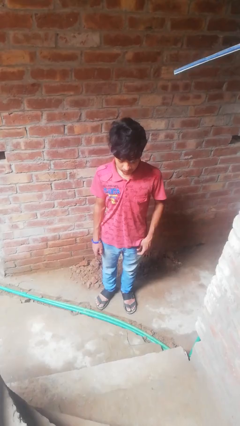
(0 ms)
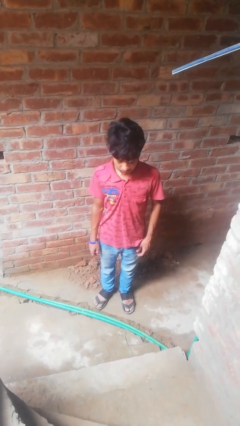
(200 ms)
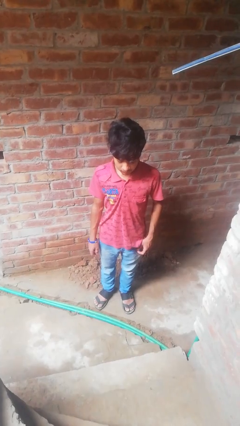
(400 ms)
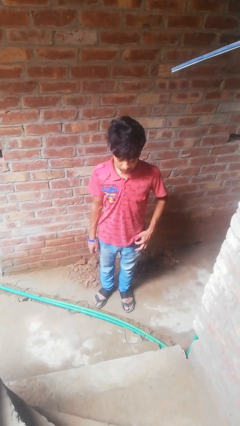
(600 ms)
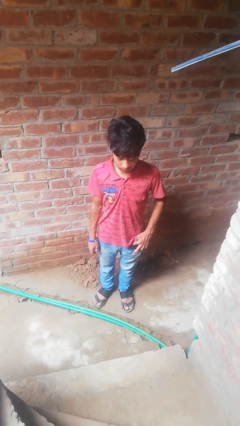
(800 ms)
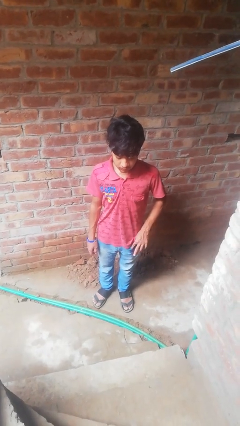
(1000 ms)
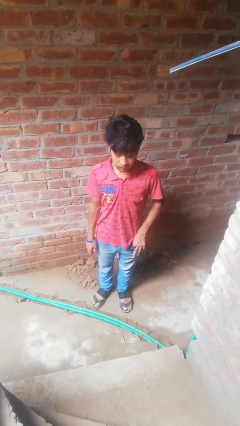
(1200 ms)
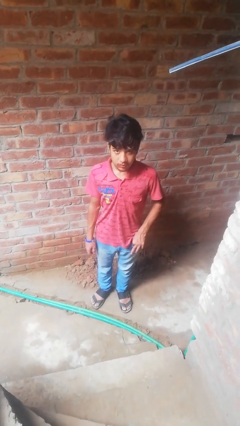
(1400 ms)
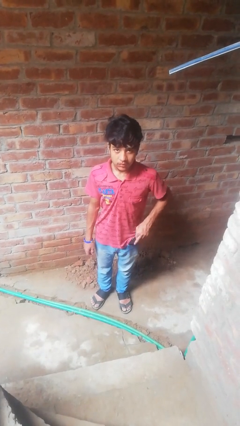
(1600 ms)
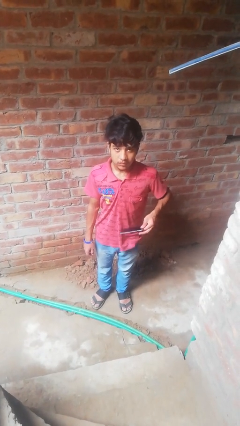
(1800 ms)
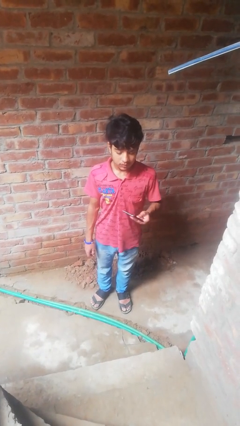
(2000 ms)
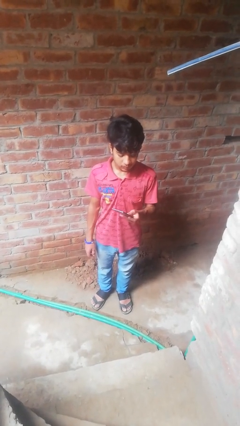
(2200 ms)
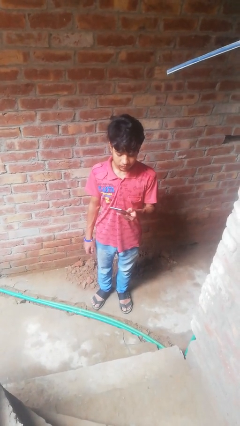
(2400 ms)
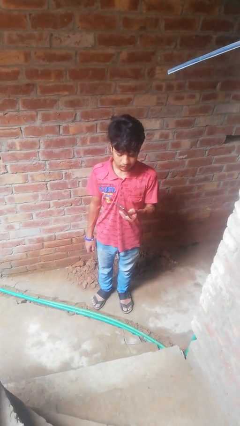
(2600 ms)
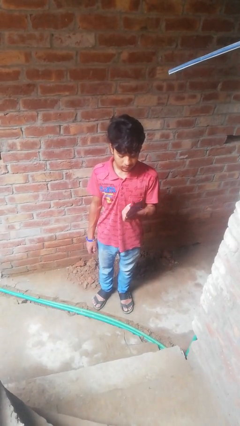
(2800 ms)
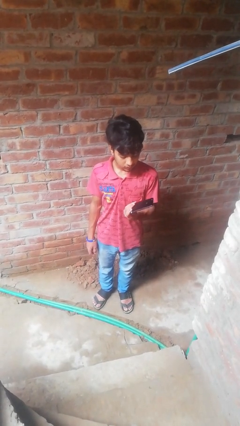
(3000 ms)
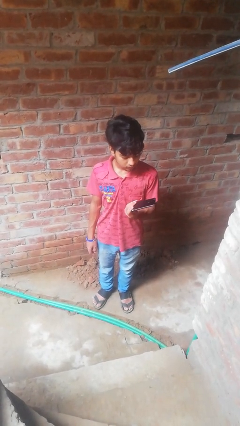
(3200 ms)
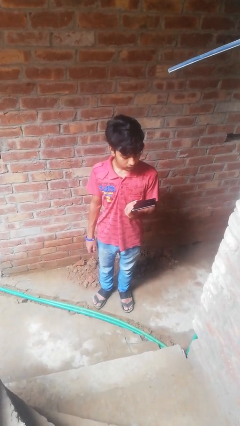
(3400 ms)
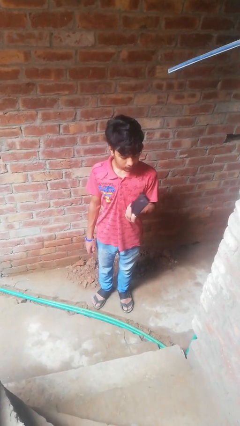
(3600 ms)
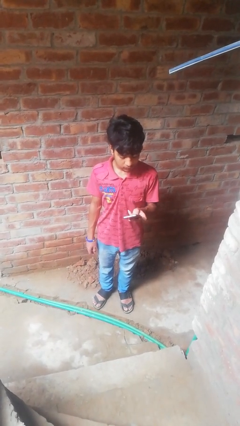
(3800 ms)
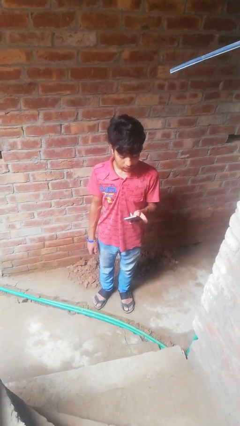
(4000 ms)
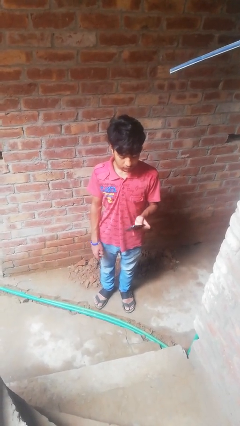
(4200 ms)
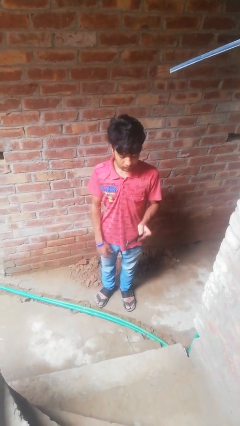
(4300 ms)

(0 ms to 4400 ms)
person takes phone from pocket

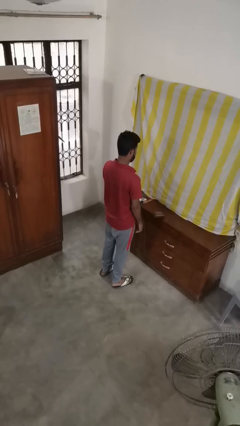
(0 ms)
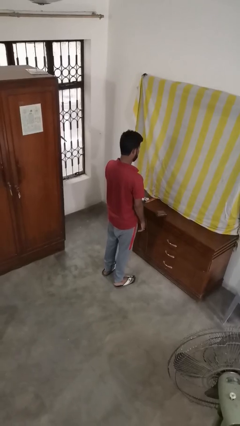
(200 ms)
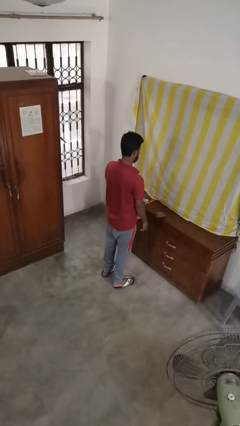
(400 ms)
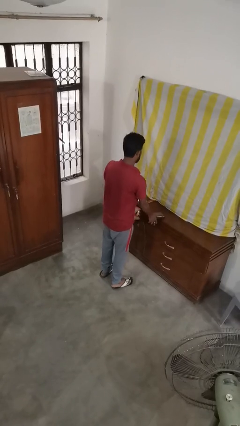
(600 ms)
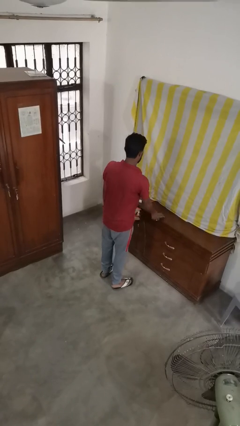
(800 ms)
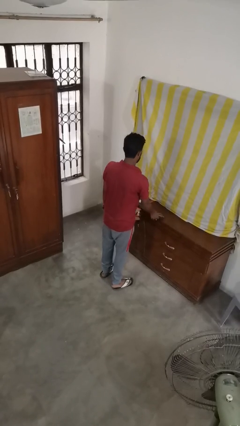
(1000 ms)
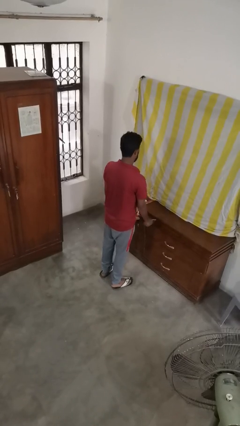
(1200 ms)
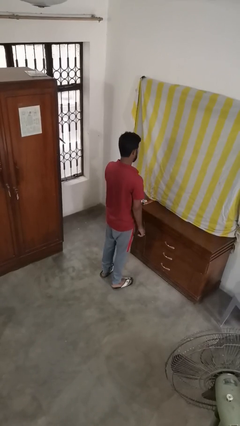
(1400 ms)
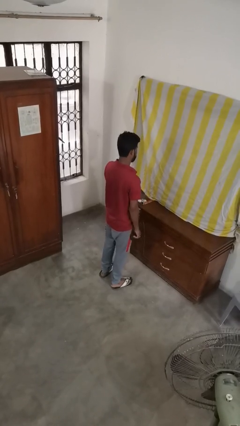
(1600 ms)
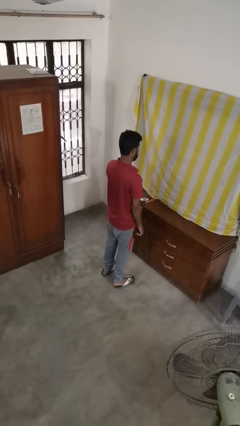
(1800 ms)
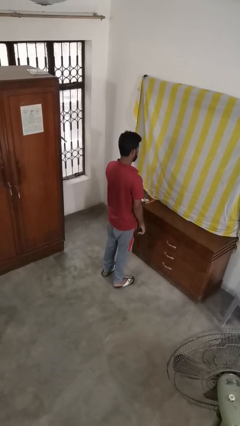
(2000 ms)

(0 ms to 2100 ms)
person picks up object from table

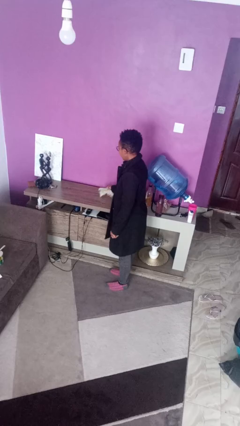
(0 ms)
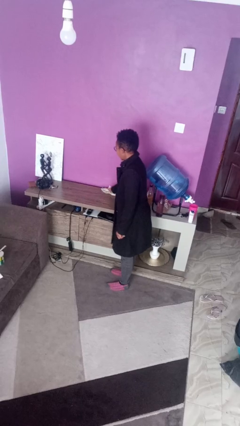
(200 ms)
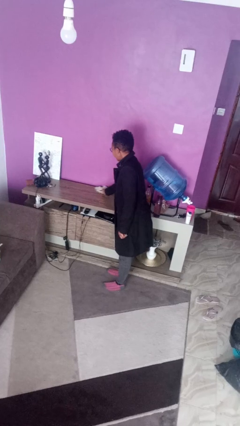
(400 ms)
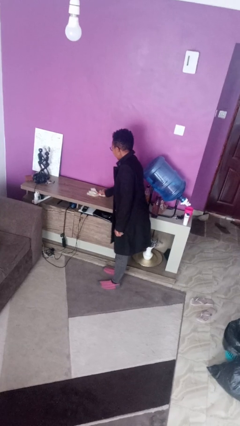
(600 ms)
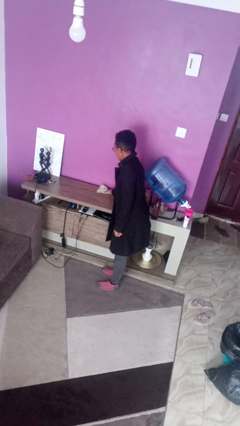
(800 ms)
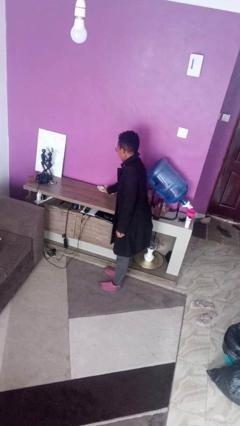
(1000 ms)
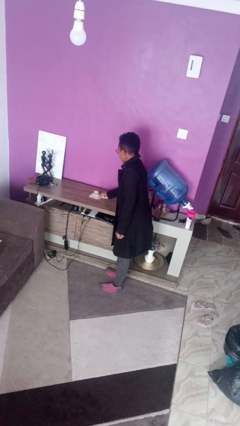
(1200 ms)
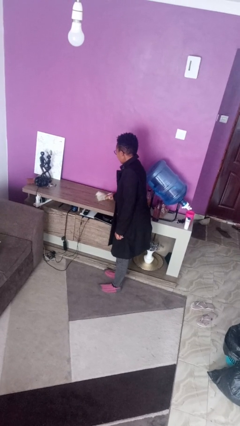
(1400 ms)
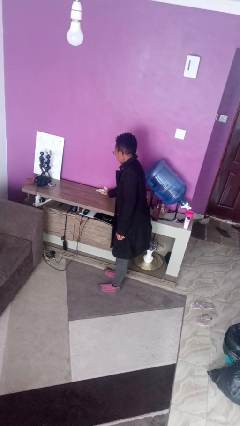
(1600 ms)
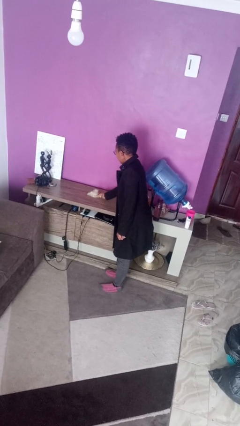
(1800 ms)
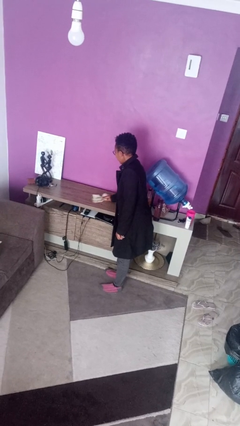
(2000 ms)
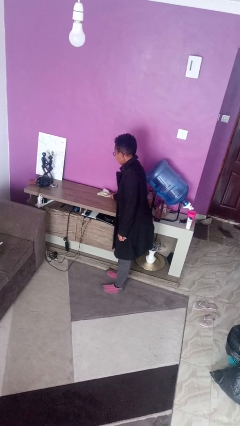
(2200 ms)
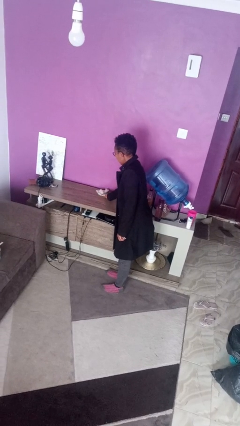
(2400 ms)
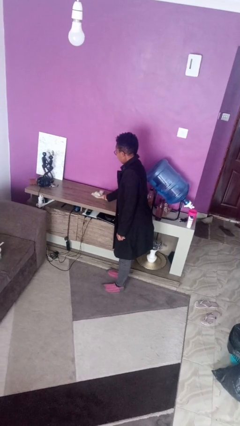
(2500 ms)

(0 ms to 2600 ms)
person cleans table with rag

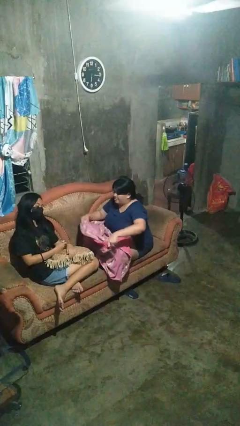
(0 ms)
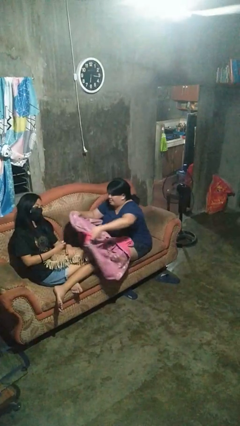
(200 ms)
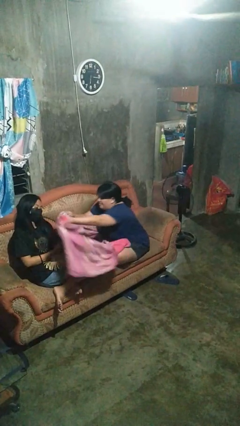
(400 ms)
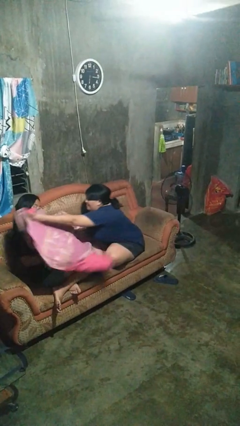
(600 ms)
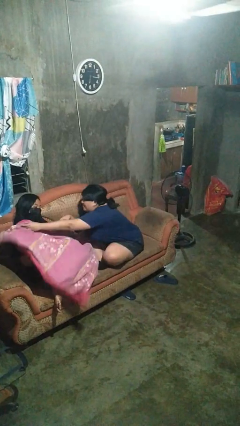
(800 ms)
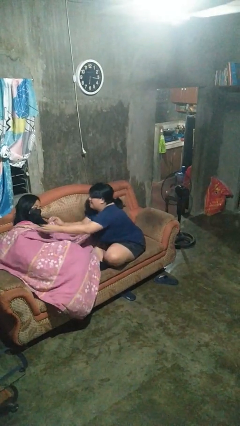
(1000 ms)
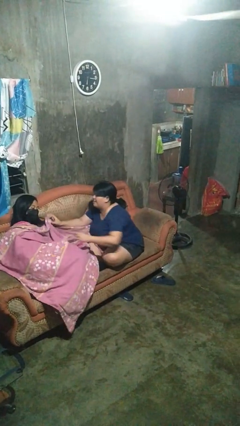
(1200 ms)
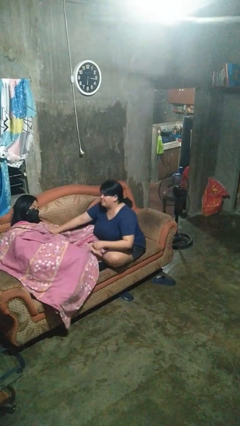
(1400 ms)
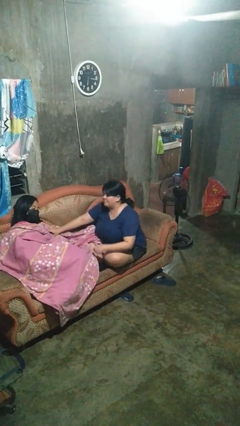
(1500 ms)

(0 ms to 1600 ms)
person covers friend with blanket

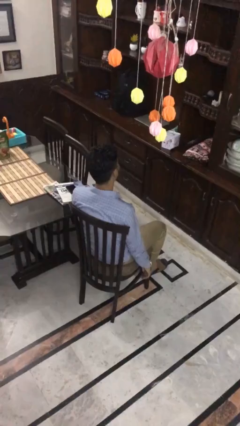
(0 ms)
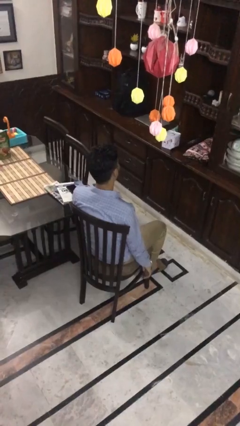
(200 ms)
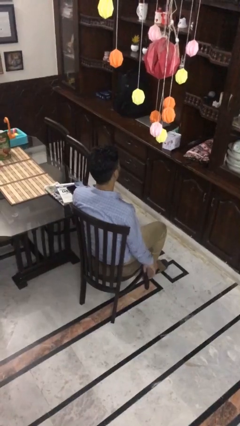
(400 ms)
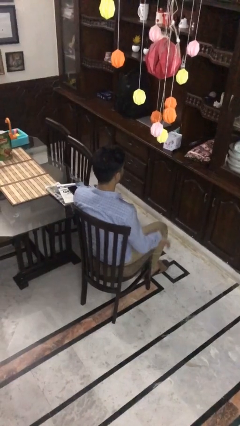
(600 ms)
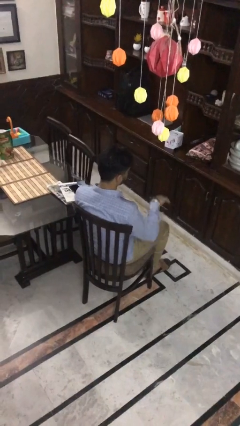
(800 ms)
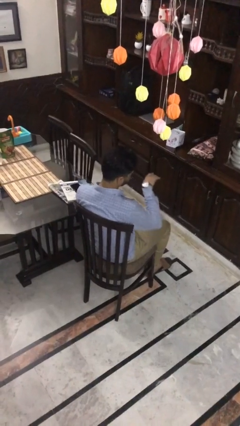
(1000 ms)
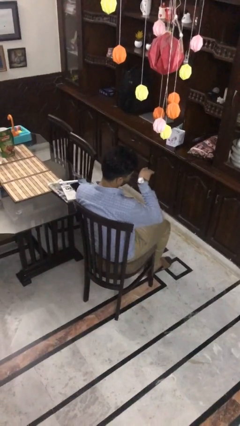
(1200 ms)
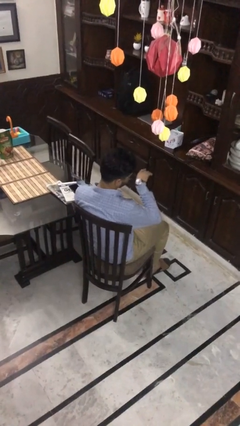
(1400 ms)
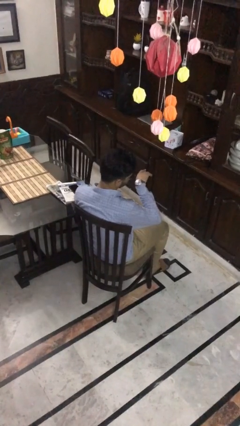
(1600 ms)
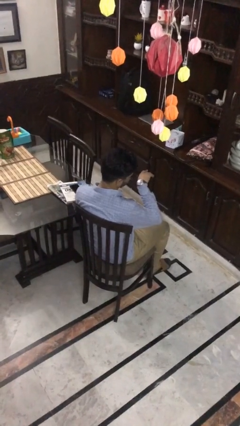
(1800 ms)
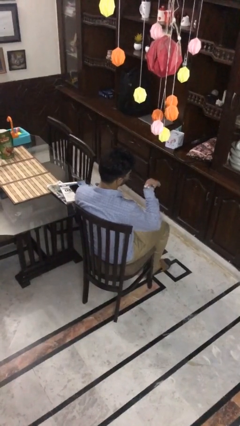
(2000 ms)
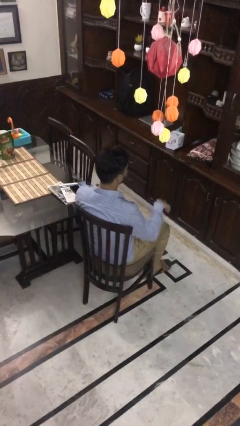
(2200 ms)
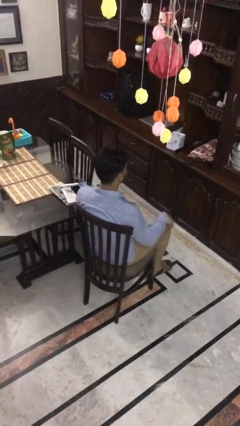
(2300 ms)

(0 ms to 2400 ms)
person looks at wristwatch

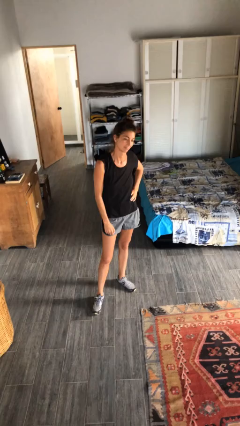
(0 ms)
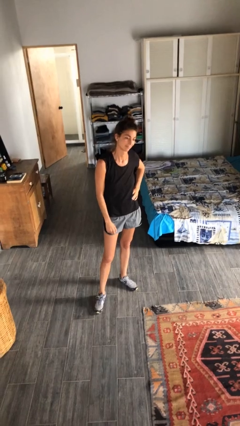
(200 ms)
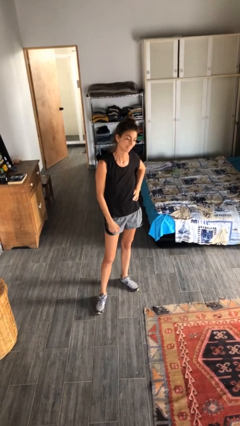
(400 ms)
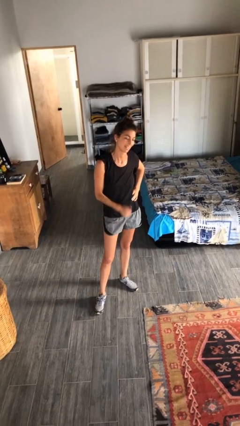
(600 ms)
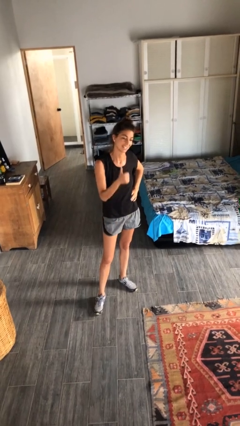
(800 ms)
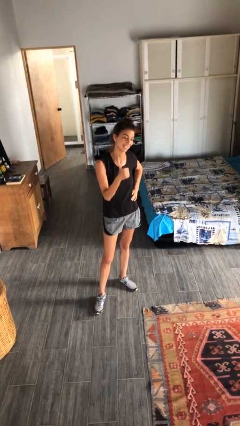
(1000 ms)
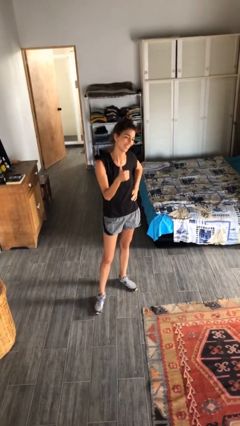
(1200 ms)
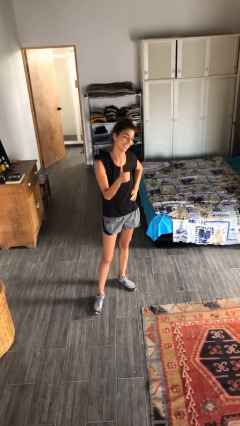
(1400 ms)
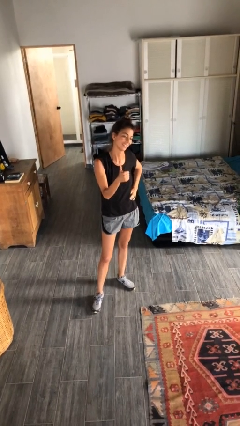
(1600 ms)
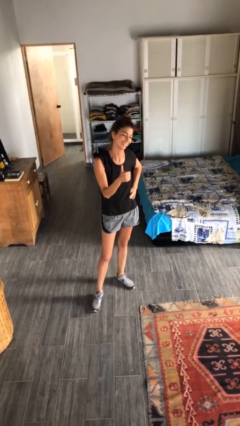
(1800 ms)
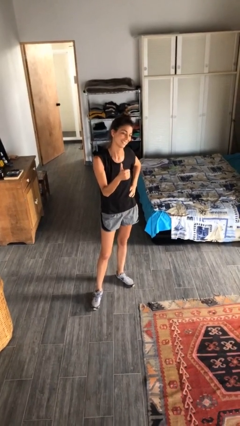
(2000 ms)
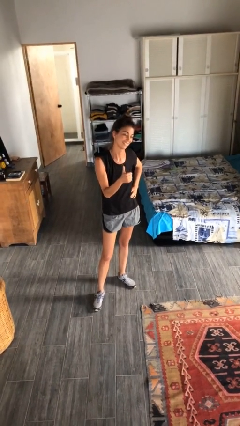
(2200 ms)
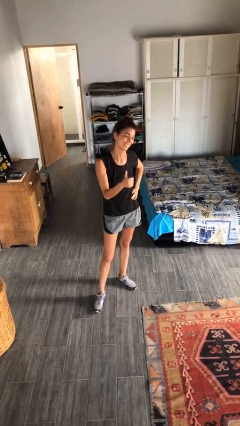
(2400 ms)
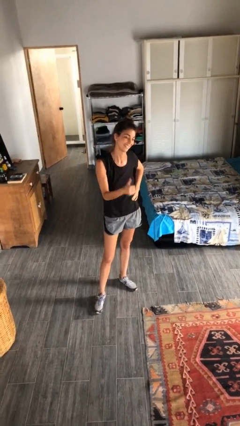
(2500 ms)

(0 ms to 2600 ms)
person gestures thumbs up

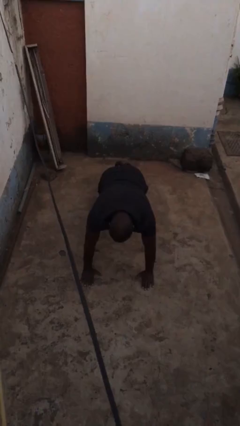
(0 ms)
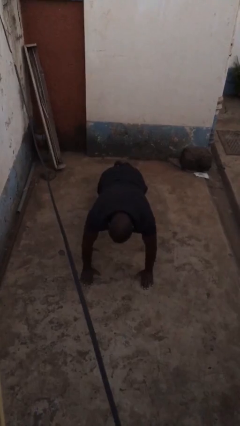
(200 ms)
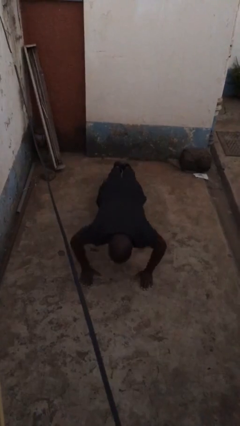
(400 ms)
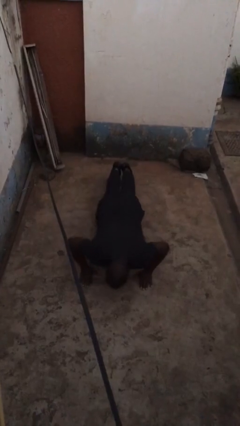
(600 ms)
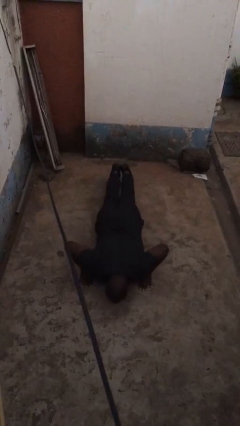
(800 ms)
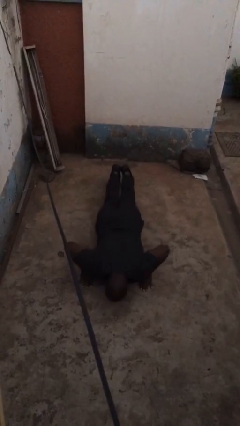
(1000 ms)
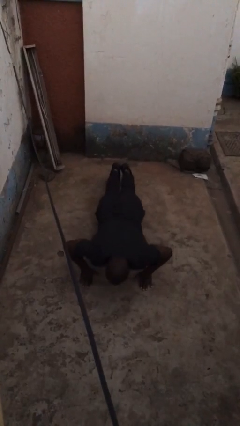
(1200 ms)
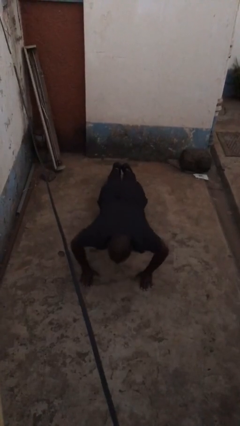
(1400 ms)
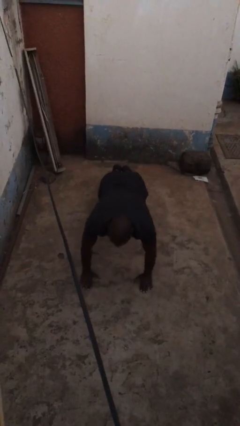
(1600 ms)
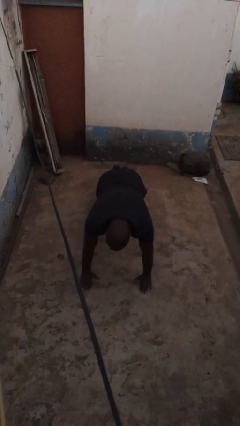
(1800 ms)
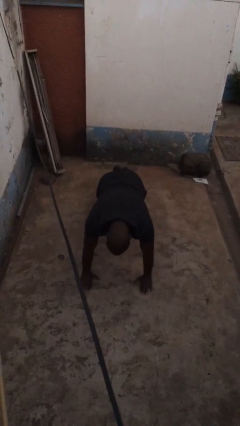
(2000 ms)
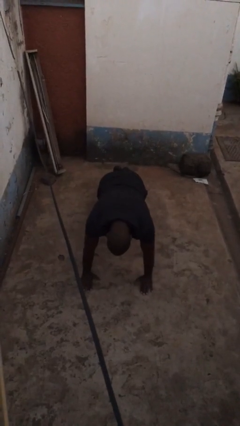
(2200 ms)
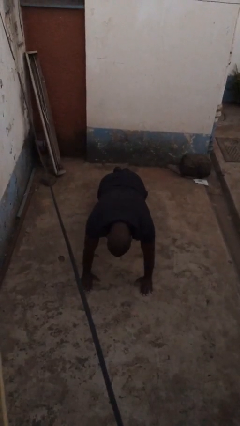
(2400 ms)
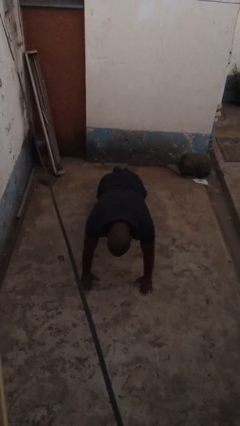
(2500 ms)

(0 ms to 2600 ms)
person exercises with pushup
